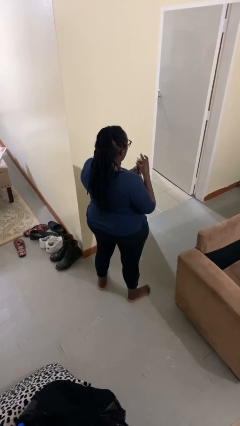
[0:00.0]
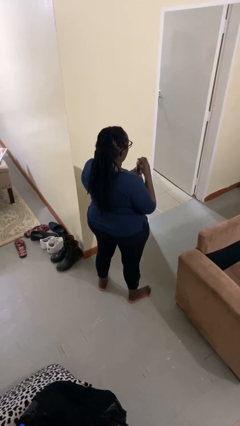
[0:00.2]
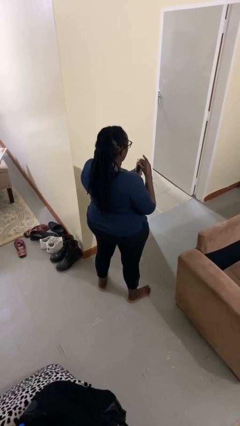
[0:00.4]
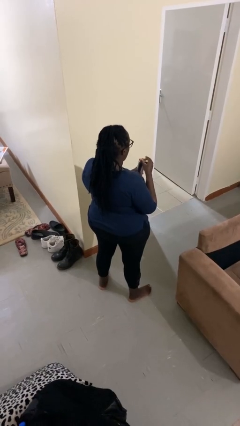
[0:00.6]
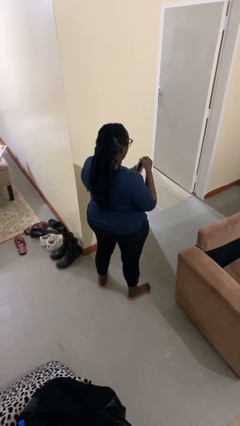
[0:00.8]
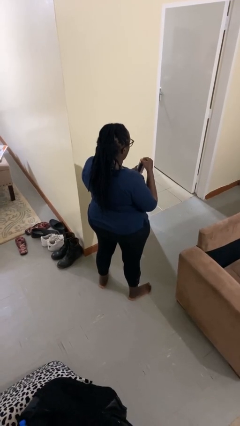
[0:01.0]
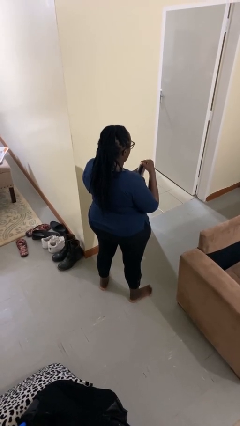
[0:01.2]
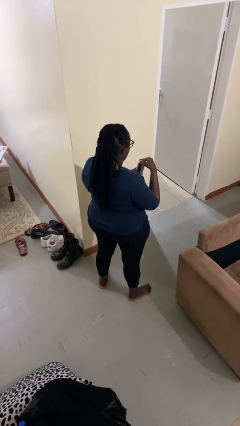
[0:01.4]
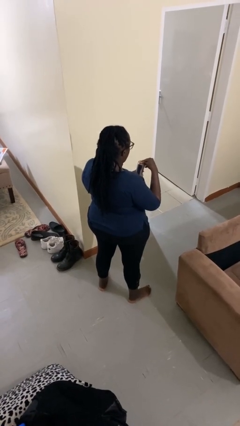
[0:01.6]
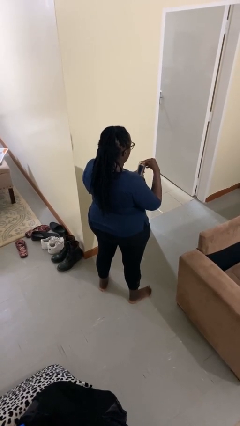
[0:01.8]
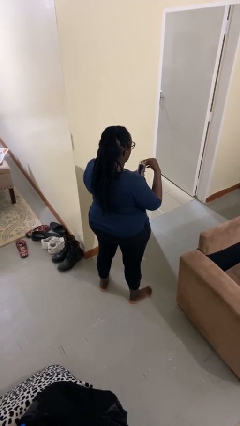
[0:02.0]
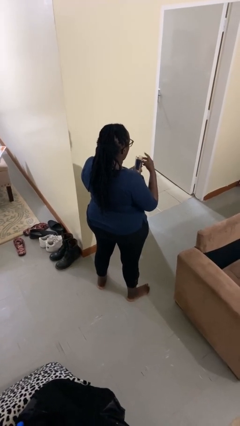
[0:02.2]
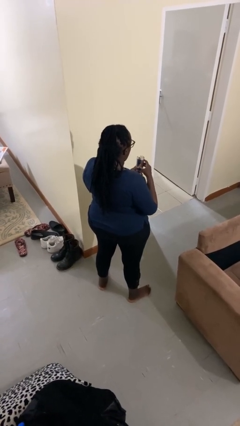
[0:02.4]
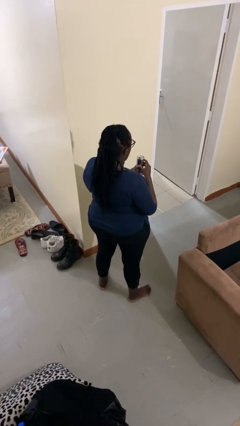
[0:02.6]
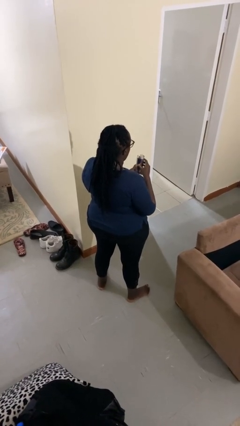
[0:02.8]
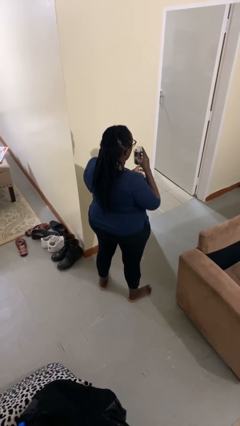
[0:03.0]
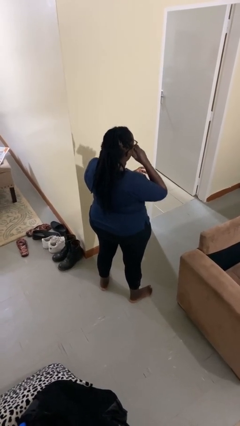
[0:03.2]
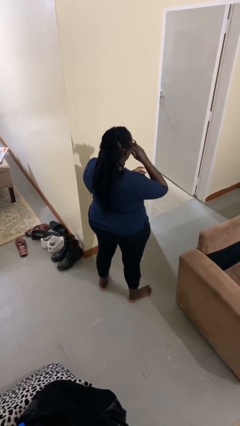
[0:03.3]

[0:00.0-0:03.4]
person opens beverage can

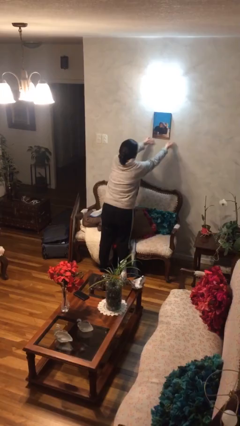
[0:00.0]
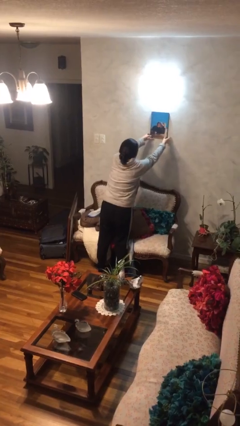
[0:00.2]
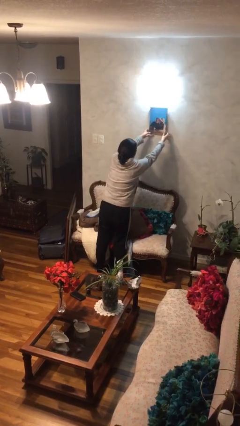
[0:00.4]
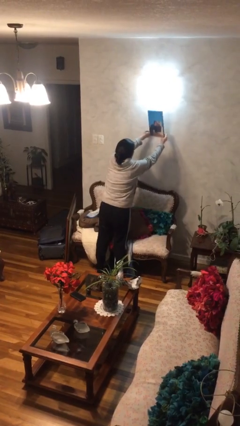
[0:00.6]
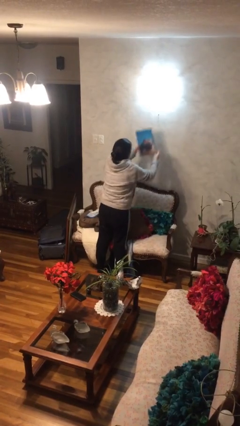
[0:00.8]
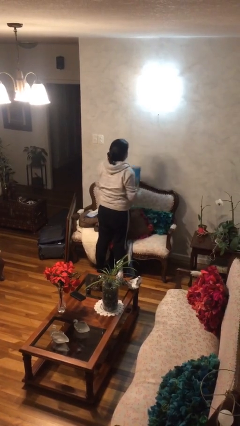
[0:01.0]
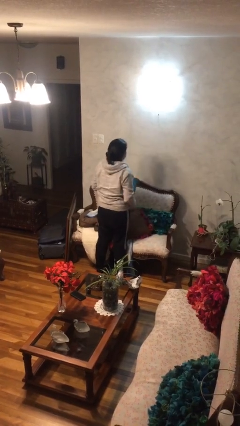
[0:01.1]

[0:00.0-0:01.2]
person takes down picture frame

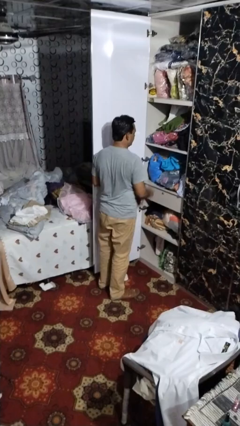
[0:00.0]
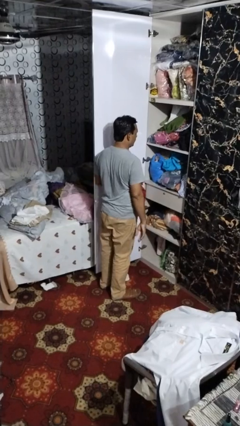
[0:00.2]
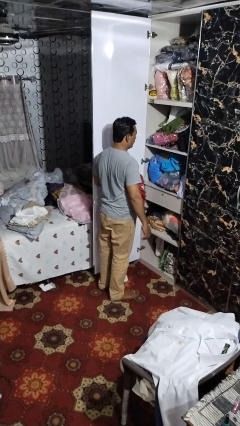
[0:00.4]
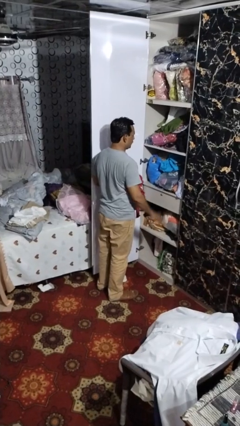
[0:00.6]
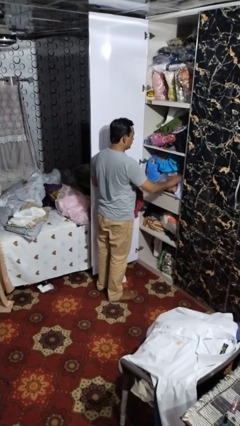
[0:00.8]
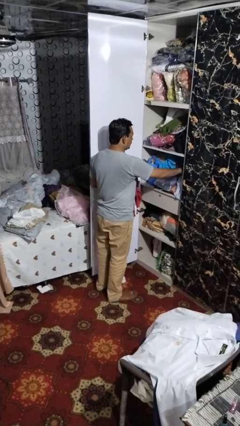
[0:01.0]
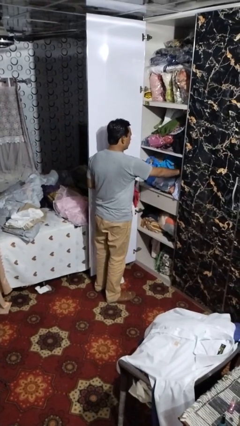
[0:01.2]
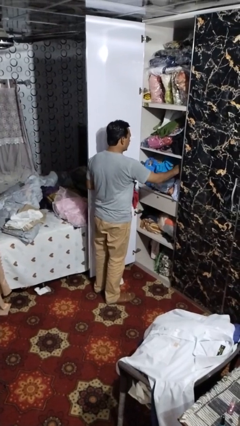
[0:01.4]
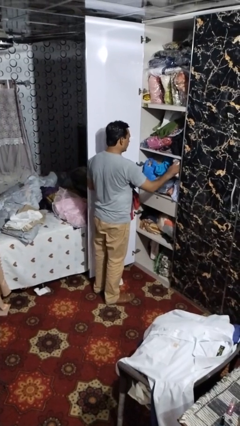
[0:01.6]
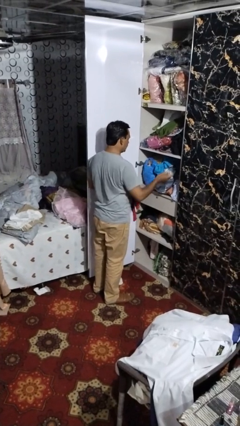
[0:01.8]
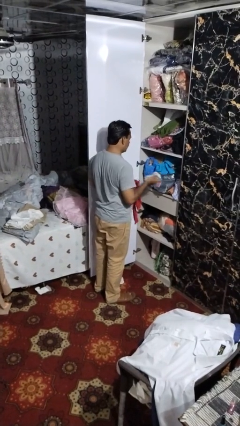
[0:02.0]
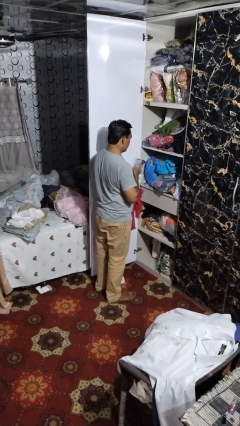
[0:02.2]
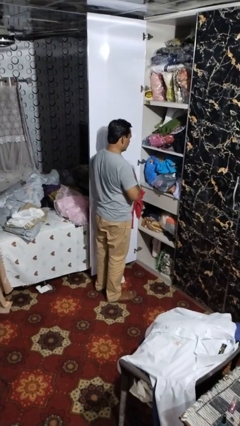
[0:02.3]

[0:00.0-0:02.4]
person takes clothes from dresser

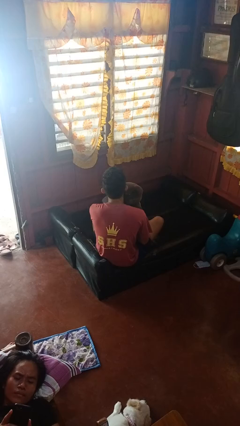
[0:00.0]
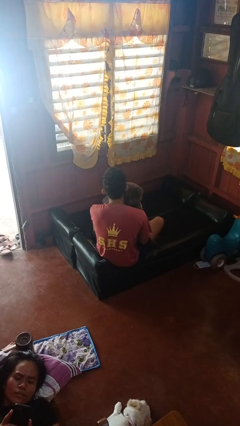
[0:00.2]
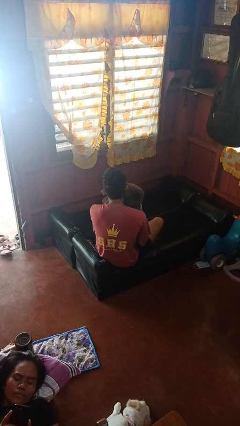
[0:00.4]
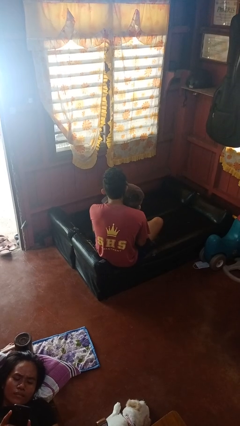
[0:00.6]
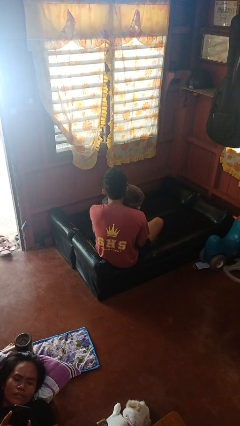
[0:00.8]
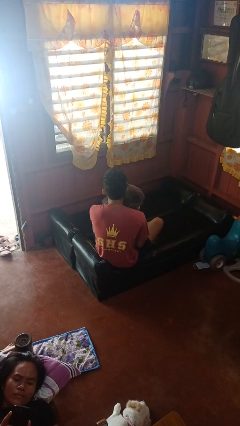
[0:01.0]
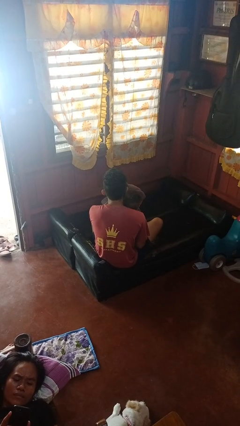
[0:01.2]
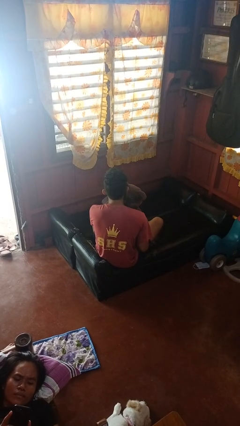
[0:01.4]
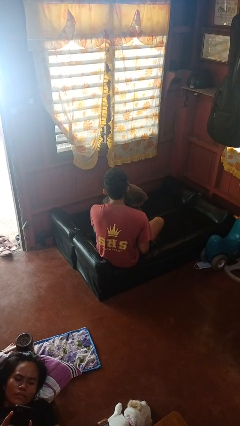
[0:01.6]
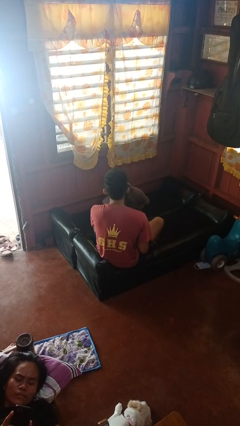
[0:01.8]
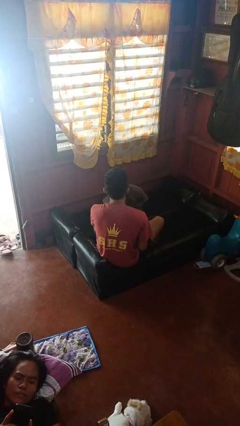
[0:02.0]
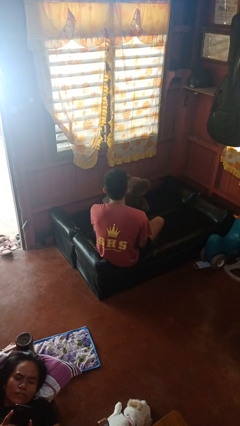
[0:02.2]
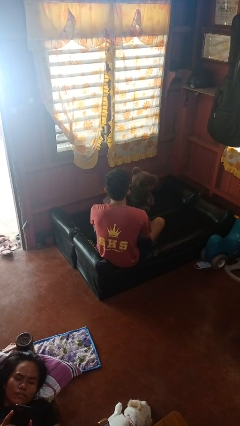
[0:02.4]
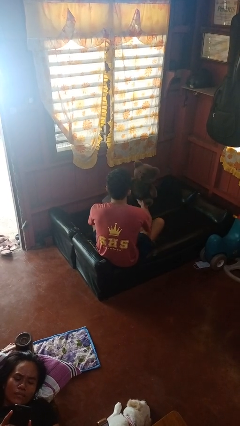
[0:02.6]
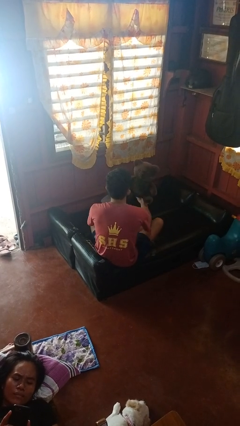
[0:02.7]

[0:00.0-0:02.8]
person hugs stuffed animal

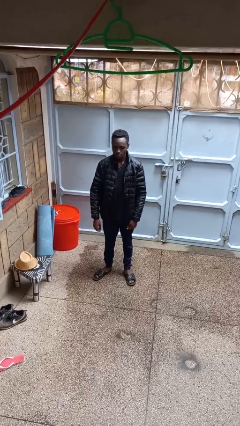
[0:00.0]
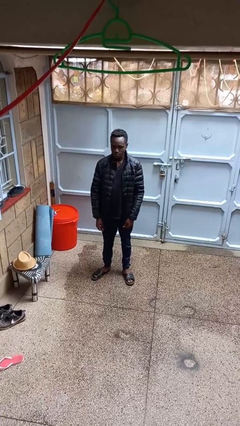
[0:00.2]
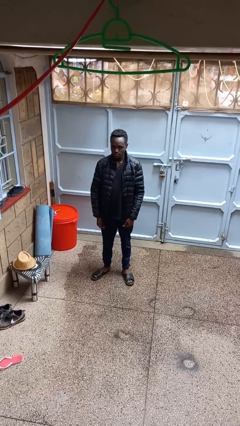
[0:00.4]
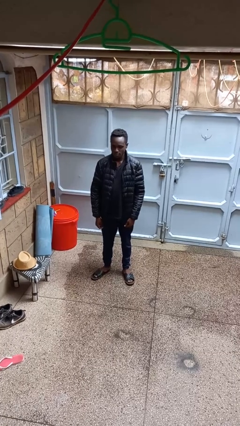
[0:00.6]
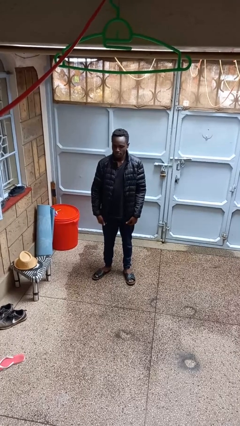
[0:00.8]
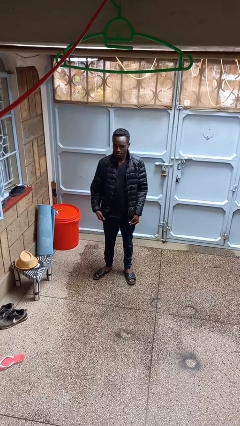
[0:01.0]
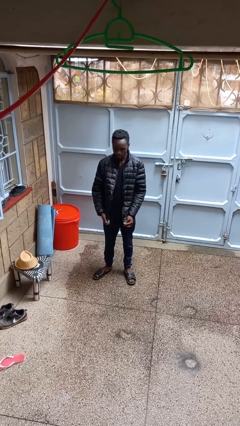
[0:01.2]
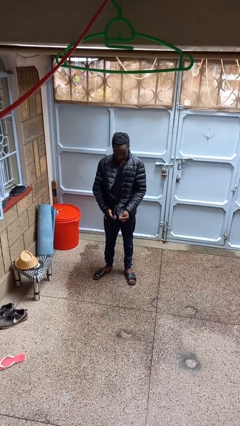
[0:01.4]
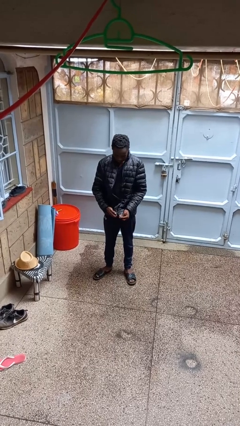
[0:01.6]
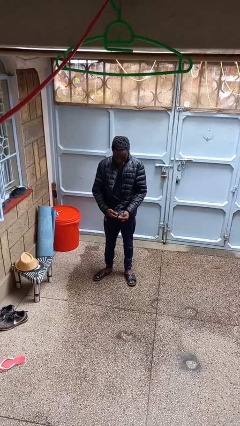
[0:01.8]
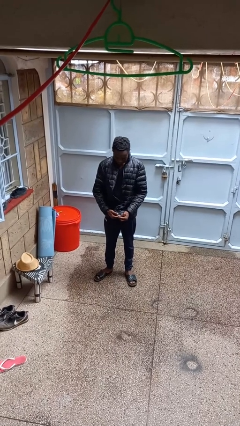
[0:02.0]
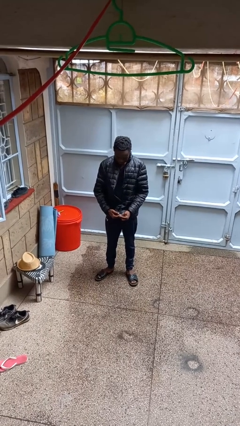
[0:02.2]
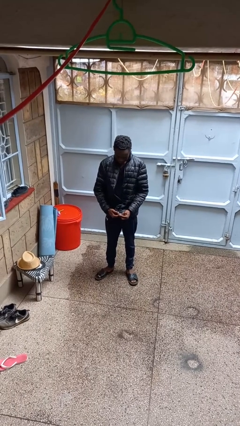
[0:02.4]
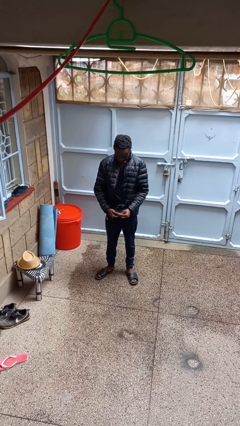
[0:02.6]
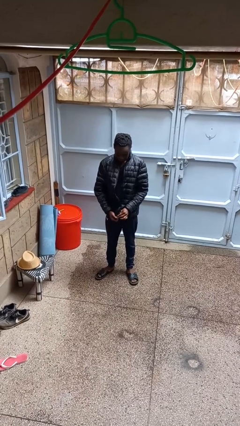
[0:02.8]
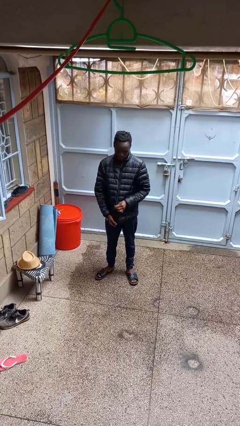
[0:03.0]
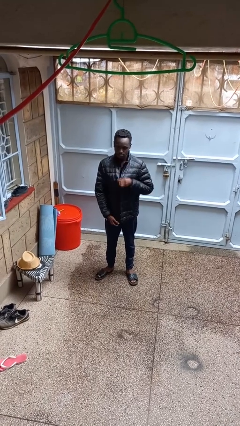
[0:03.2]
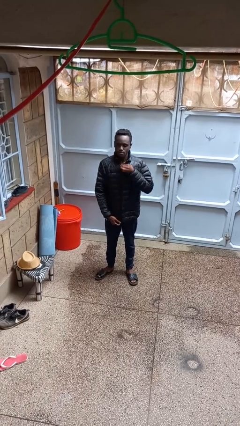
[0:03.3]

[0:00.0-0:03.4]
person zips up jacket

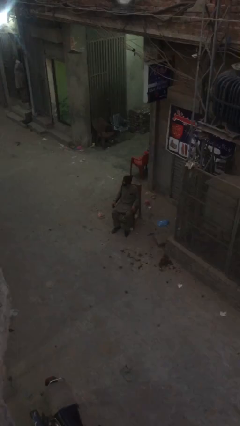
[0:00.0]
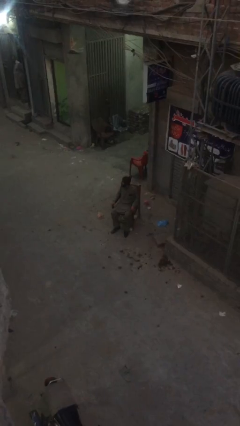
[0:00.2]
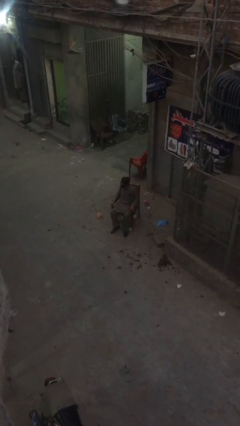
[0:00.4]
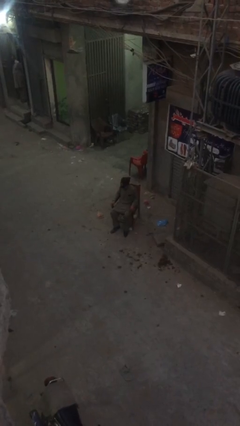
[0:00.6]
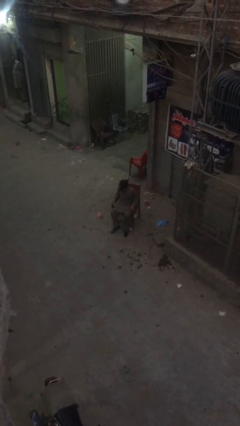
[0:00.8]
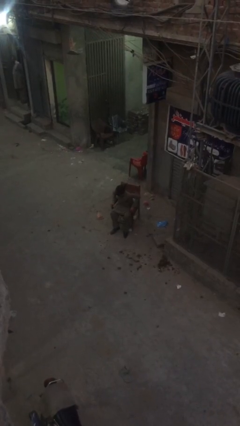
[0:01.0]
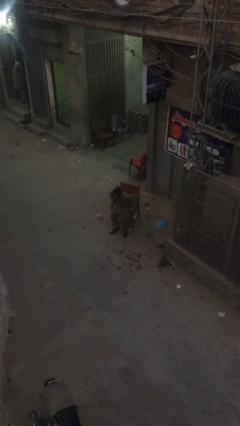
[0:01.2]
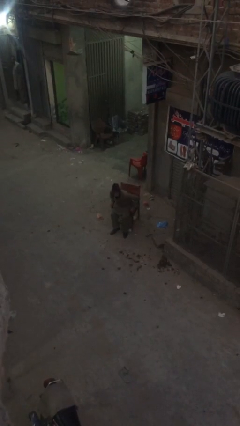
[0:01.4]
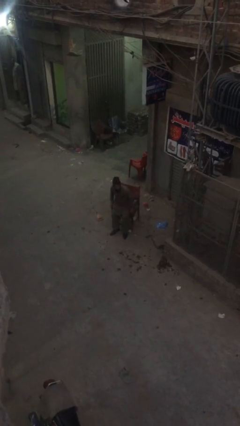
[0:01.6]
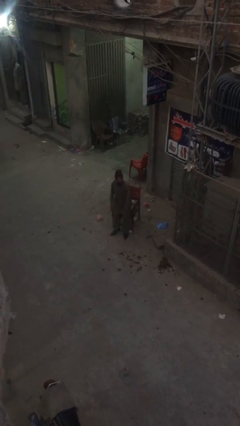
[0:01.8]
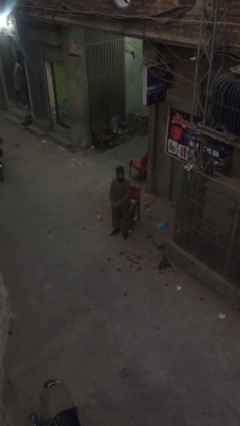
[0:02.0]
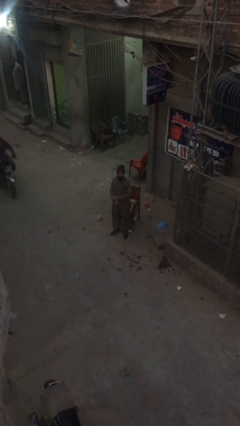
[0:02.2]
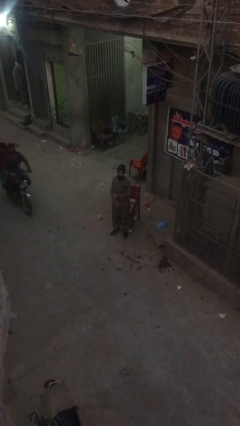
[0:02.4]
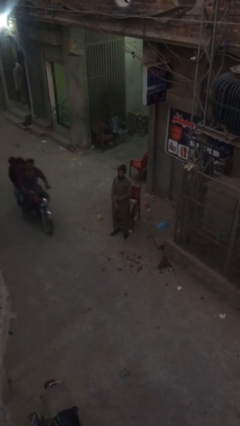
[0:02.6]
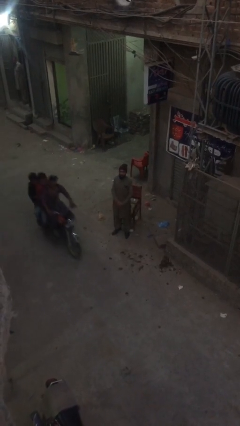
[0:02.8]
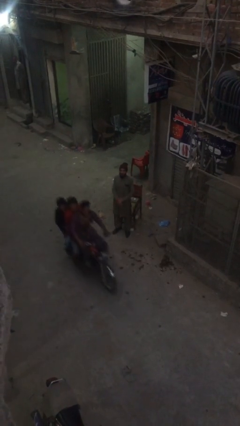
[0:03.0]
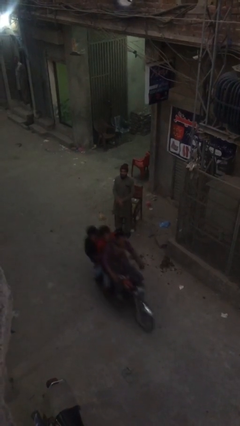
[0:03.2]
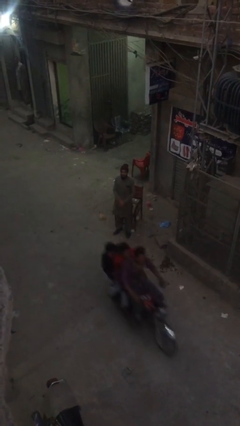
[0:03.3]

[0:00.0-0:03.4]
person stands up

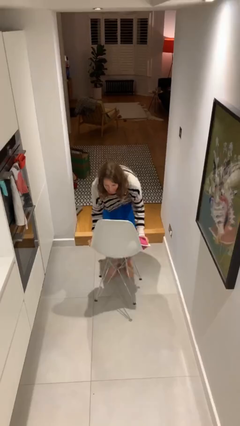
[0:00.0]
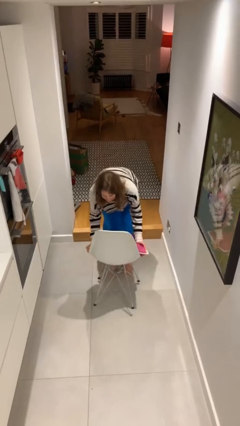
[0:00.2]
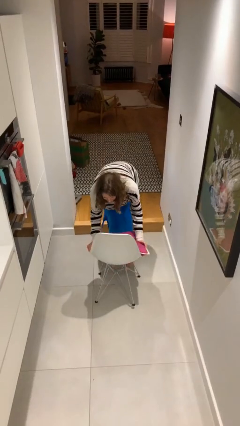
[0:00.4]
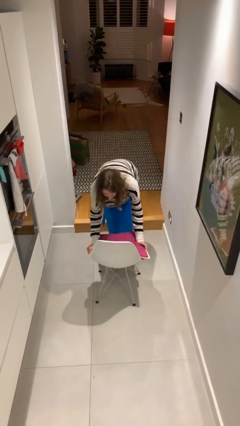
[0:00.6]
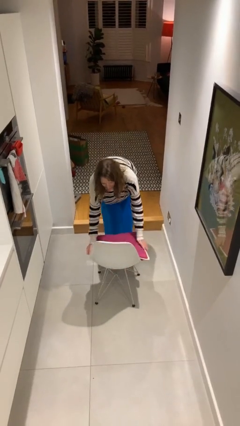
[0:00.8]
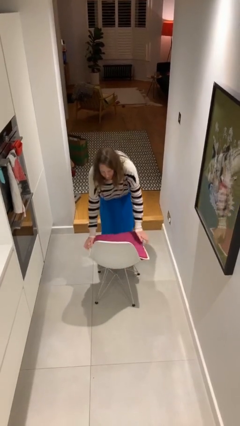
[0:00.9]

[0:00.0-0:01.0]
person puts down object on floor
